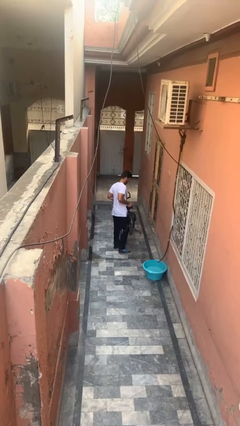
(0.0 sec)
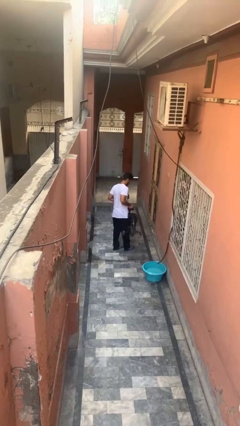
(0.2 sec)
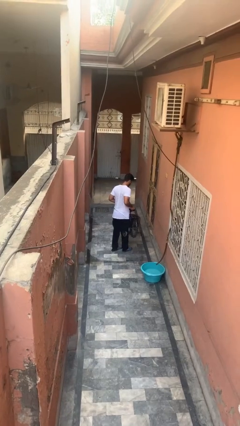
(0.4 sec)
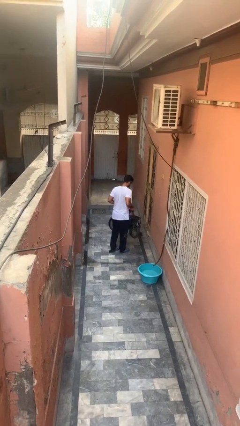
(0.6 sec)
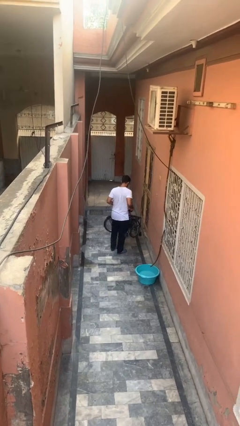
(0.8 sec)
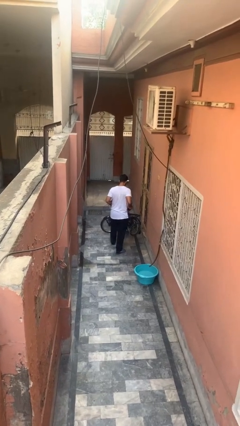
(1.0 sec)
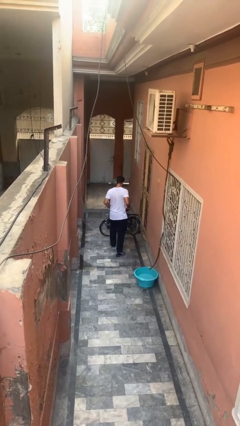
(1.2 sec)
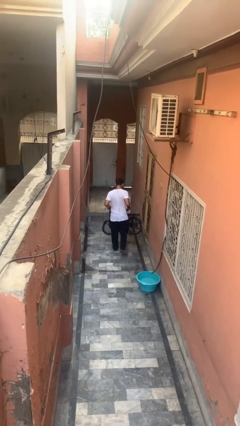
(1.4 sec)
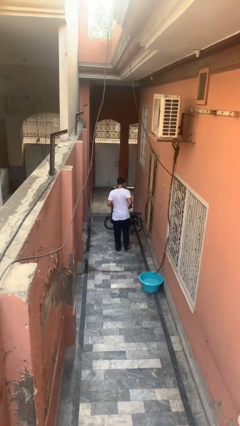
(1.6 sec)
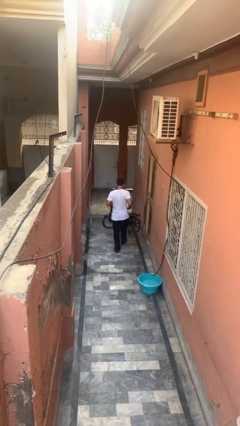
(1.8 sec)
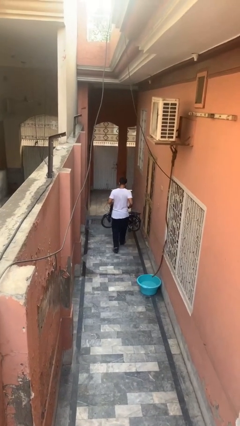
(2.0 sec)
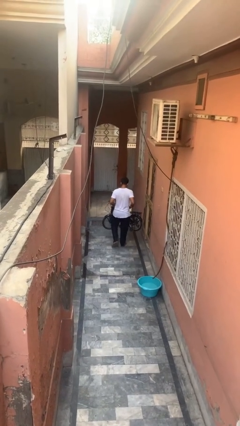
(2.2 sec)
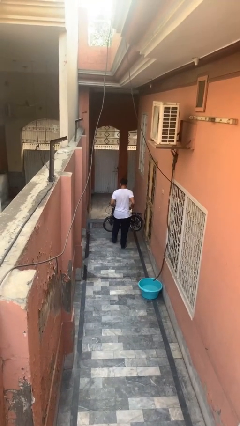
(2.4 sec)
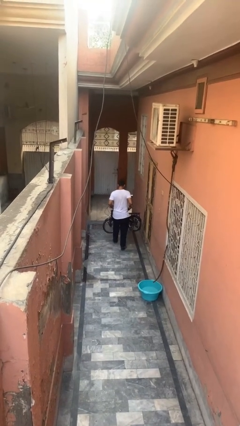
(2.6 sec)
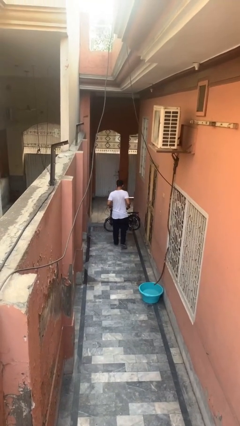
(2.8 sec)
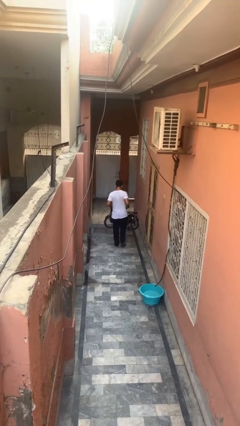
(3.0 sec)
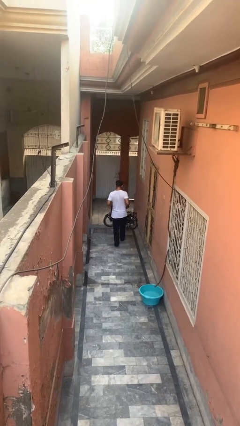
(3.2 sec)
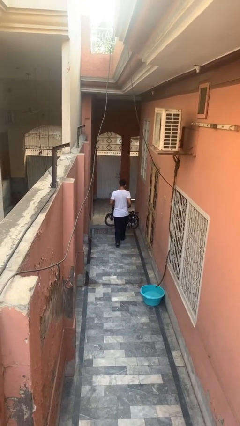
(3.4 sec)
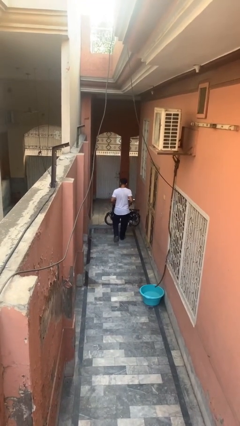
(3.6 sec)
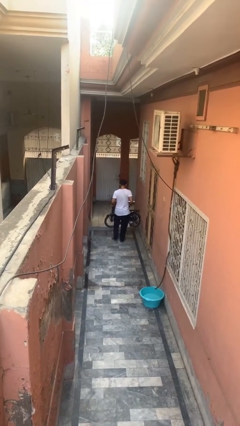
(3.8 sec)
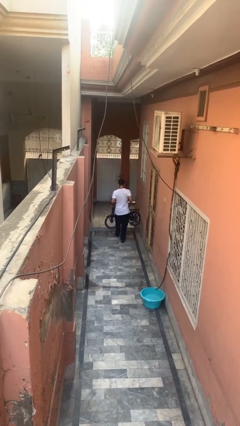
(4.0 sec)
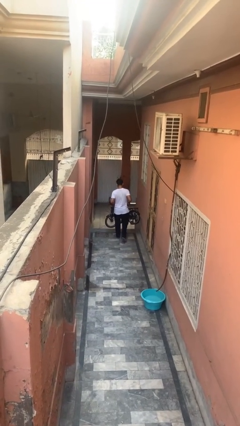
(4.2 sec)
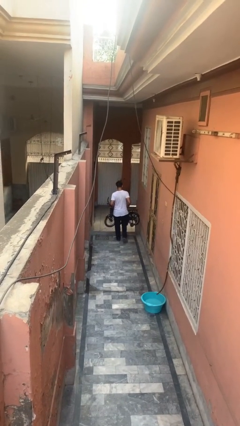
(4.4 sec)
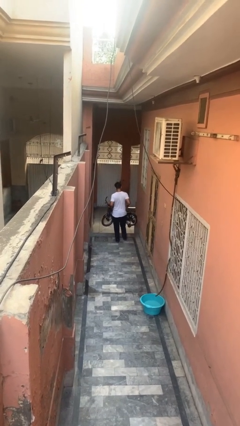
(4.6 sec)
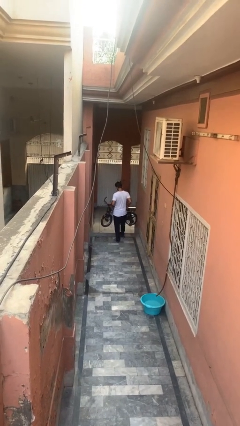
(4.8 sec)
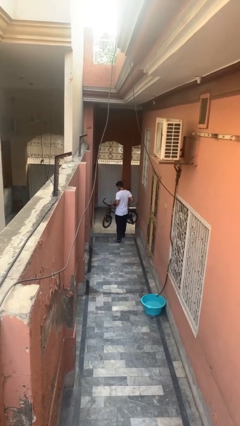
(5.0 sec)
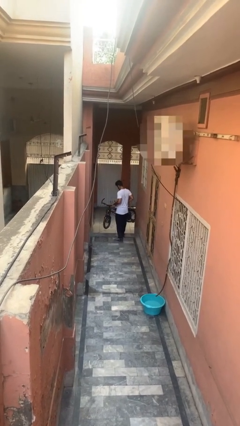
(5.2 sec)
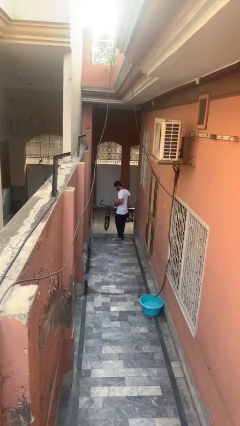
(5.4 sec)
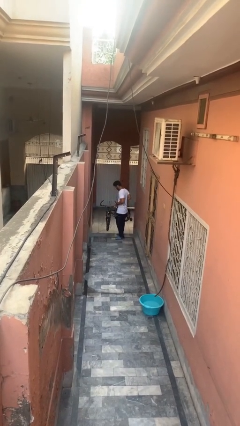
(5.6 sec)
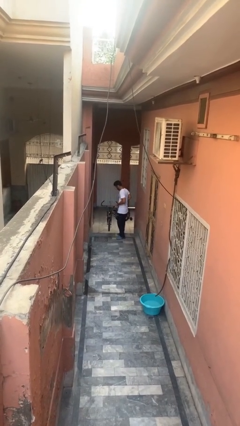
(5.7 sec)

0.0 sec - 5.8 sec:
person carries bicycle

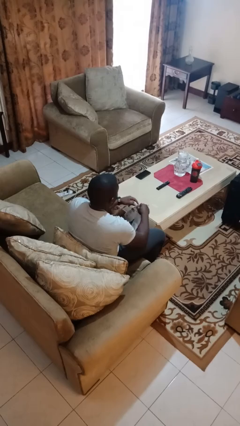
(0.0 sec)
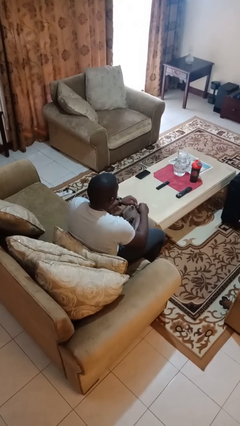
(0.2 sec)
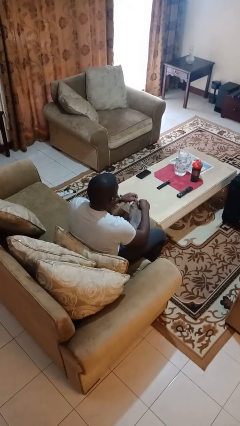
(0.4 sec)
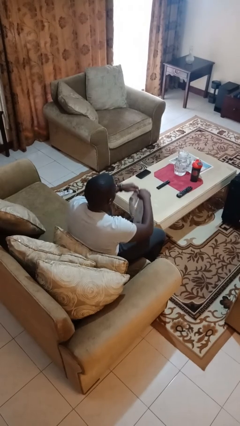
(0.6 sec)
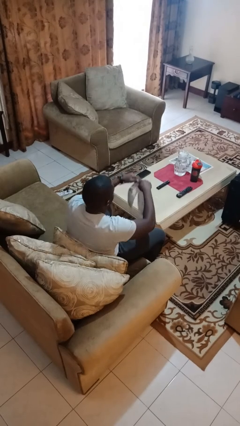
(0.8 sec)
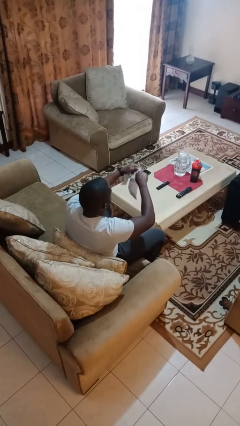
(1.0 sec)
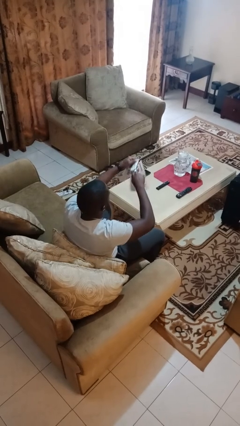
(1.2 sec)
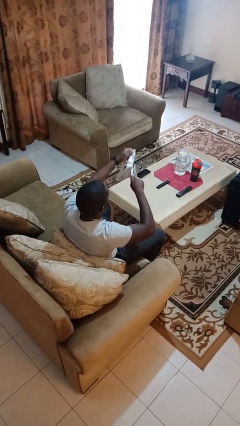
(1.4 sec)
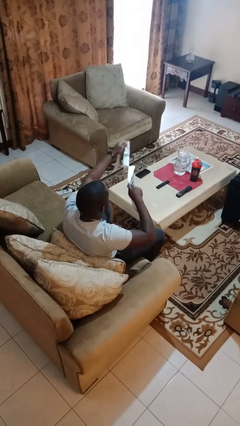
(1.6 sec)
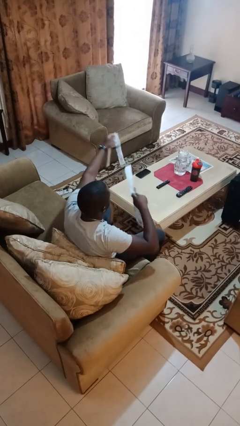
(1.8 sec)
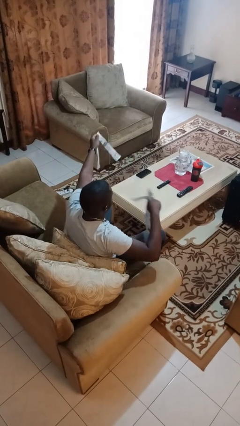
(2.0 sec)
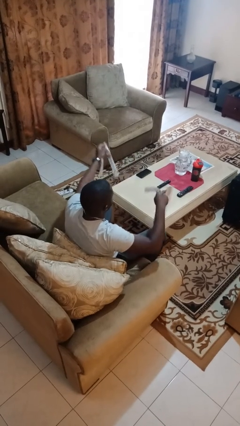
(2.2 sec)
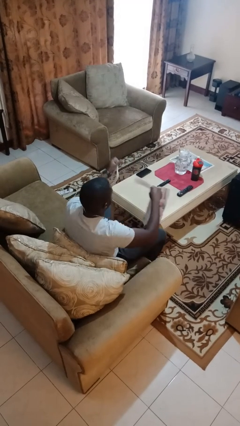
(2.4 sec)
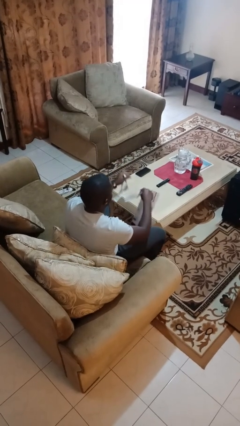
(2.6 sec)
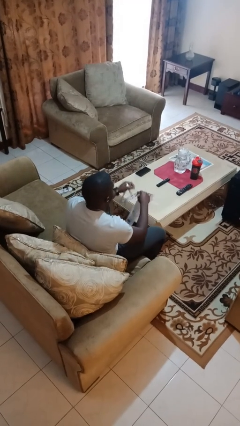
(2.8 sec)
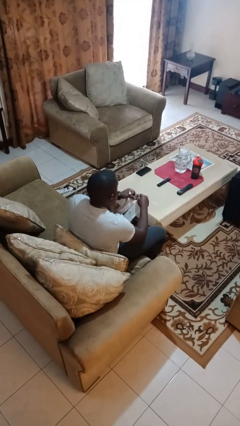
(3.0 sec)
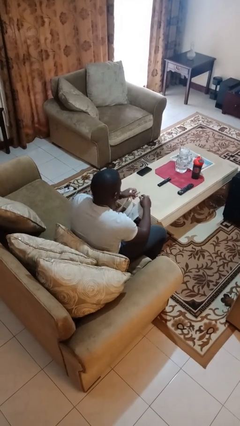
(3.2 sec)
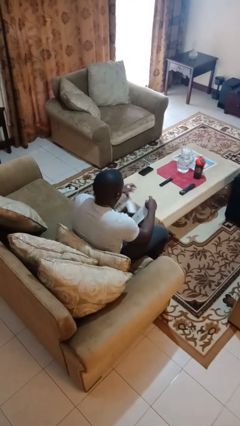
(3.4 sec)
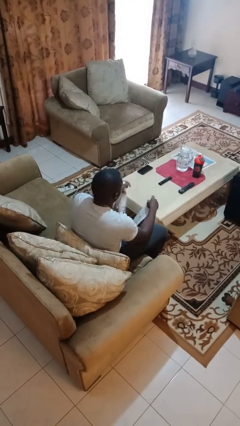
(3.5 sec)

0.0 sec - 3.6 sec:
person tears paper

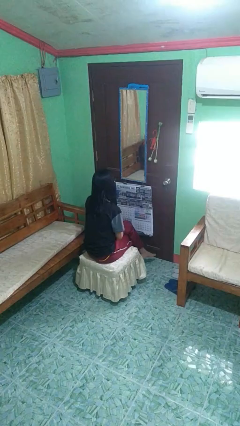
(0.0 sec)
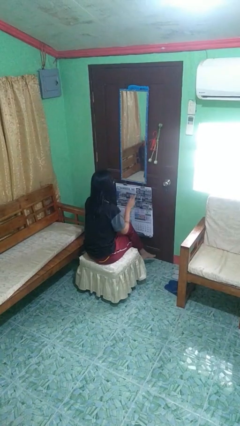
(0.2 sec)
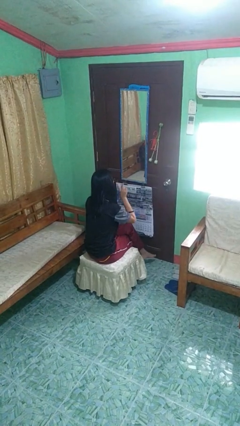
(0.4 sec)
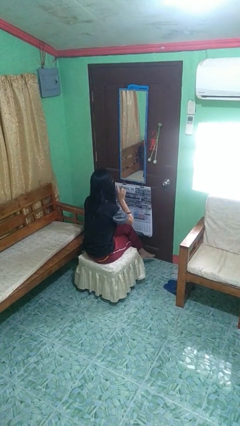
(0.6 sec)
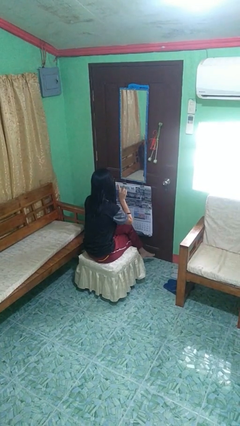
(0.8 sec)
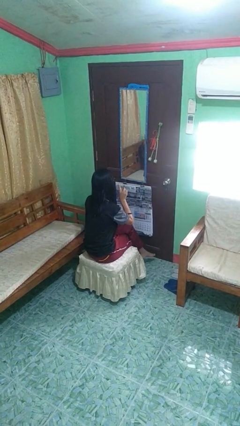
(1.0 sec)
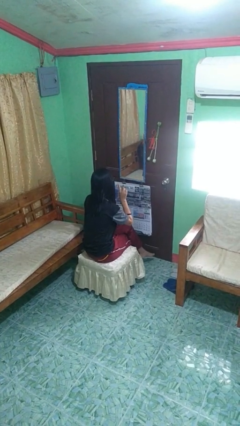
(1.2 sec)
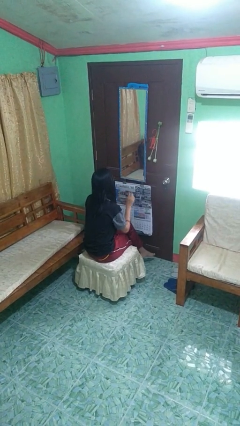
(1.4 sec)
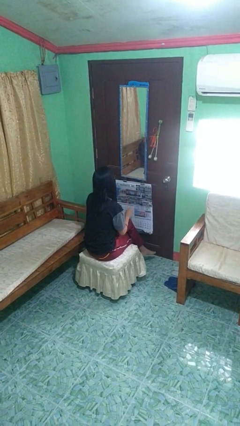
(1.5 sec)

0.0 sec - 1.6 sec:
person gestures peace

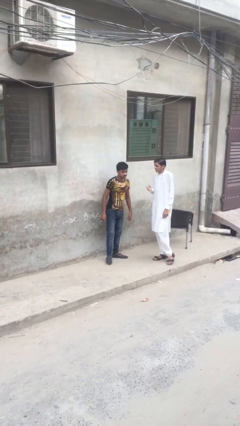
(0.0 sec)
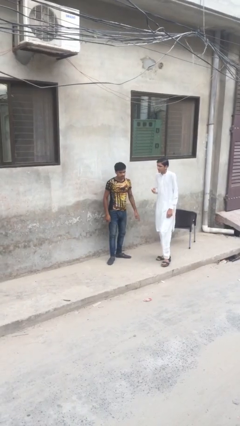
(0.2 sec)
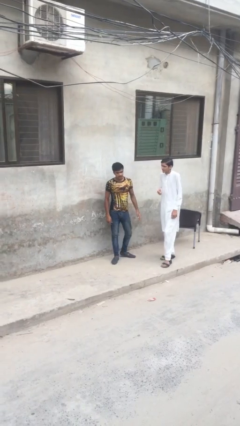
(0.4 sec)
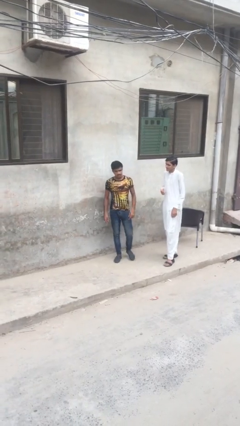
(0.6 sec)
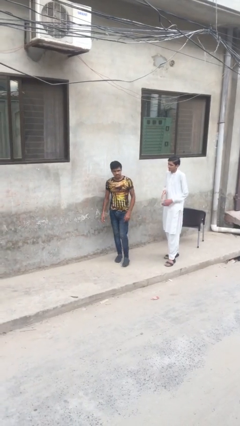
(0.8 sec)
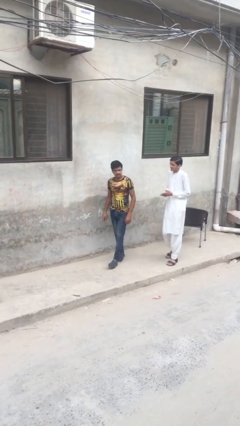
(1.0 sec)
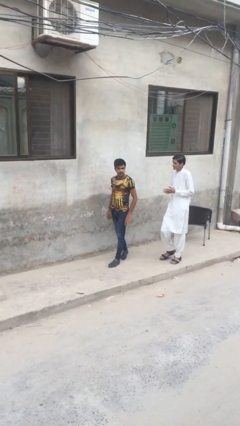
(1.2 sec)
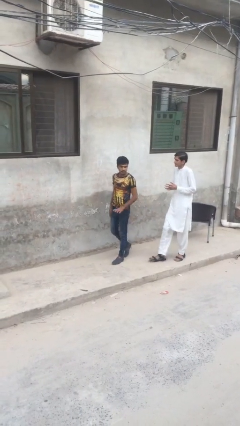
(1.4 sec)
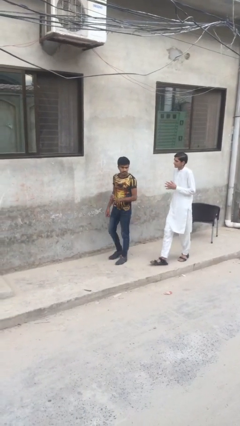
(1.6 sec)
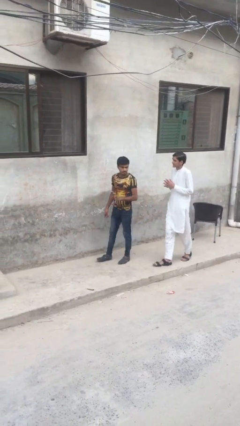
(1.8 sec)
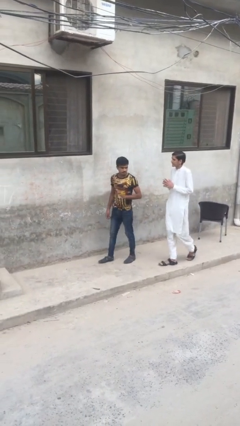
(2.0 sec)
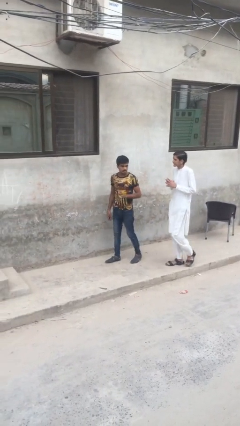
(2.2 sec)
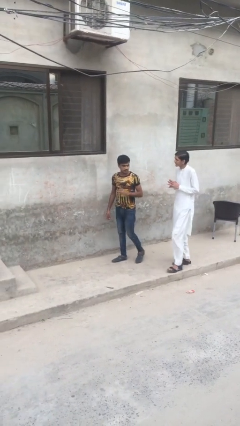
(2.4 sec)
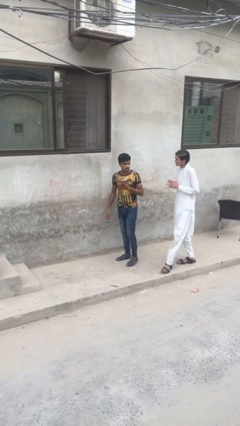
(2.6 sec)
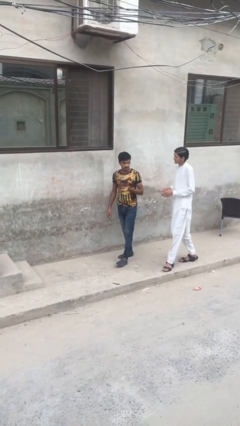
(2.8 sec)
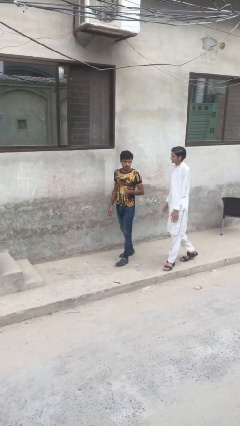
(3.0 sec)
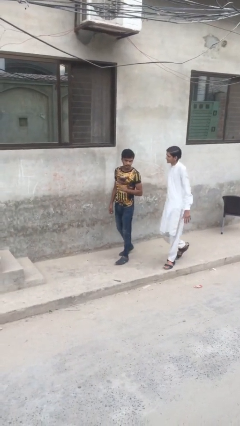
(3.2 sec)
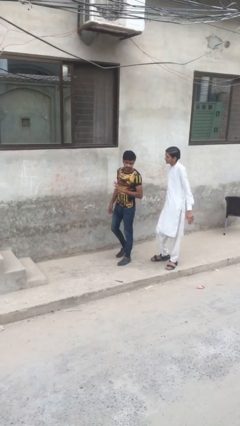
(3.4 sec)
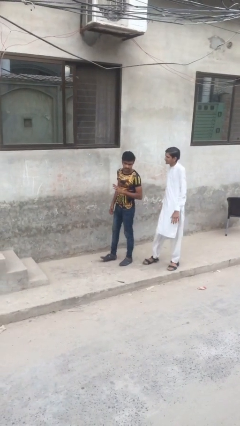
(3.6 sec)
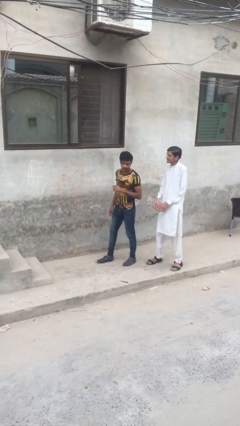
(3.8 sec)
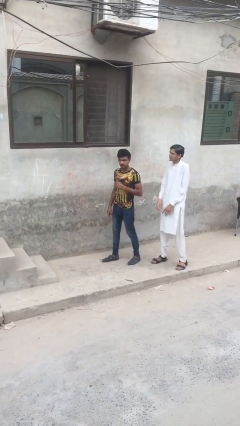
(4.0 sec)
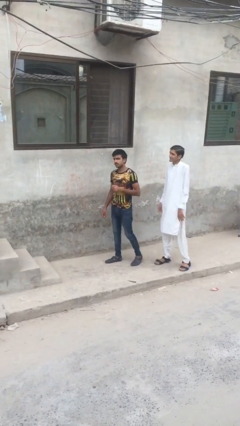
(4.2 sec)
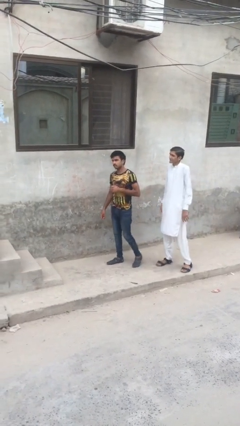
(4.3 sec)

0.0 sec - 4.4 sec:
person talks to person

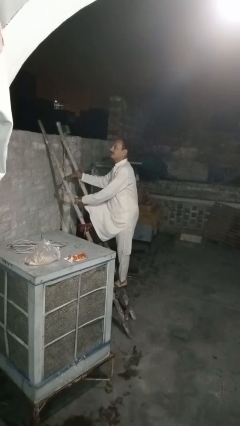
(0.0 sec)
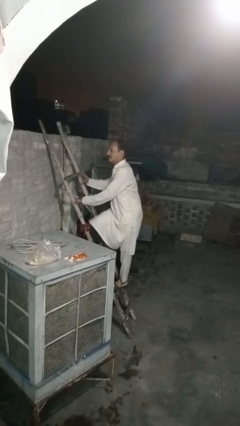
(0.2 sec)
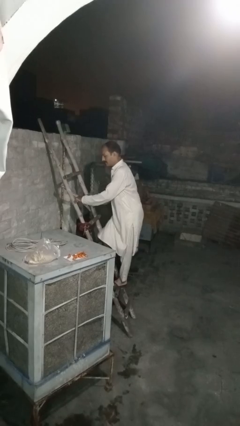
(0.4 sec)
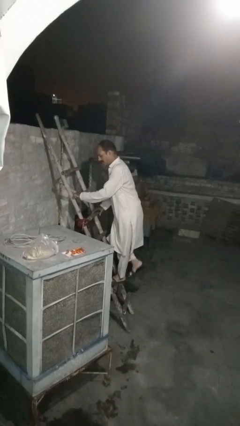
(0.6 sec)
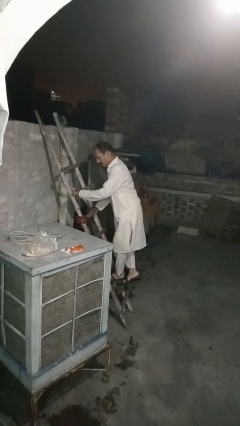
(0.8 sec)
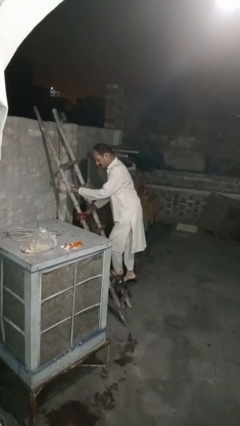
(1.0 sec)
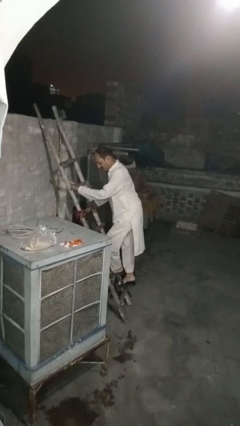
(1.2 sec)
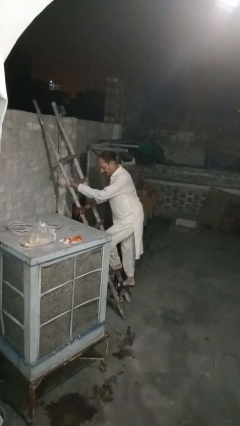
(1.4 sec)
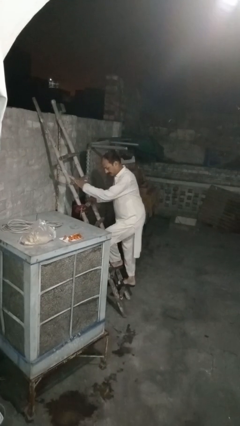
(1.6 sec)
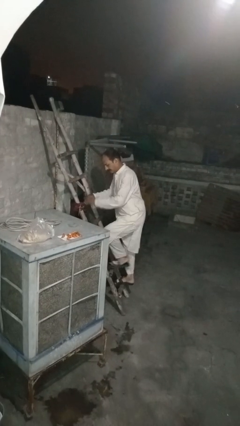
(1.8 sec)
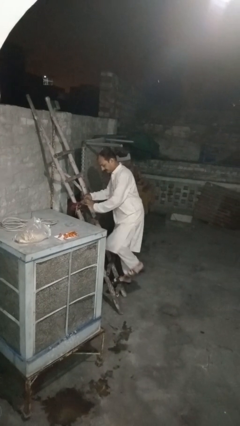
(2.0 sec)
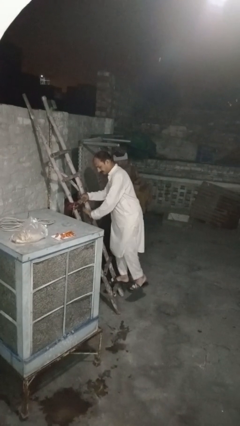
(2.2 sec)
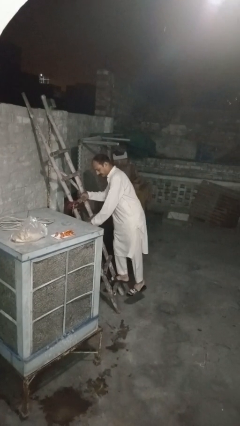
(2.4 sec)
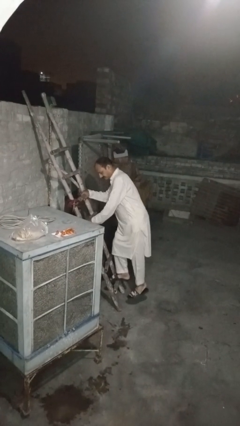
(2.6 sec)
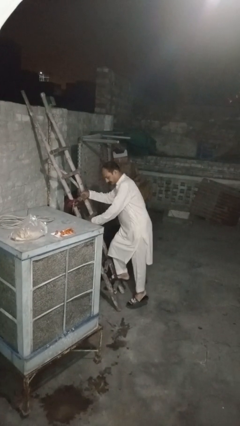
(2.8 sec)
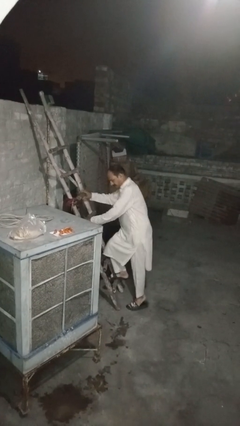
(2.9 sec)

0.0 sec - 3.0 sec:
person climbs down ladder
